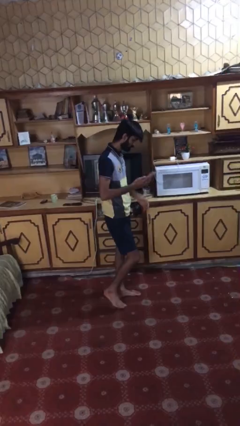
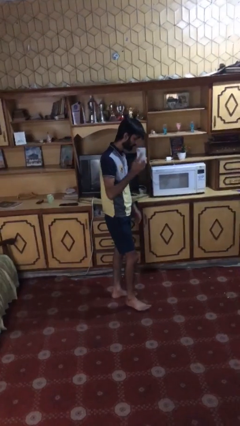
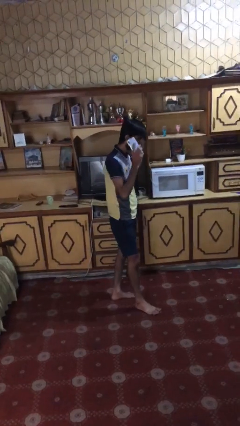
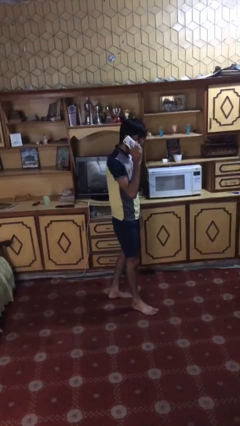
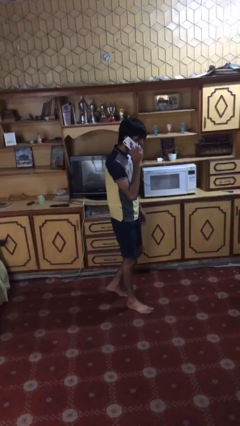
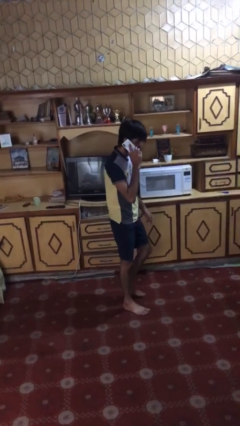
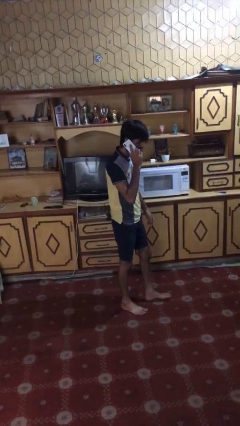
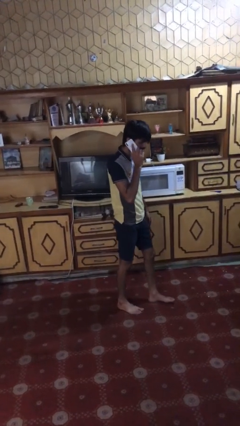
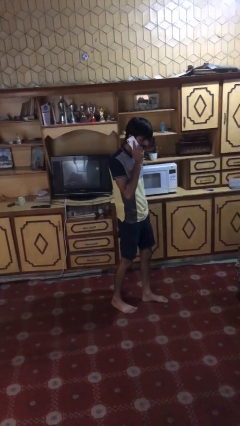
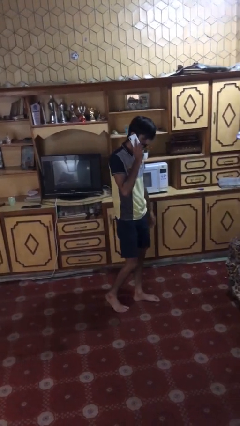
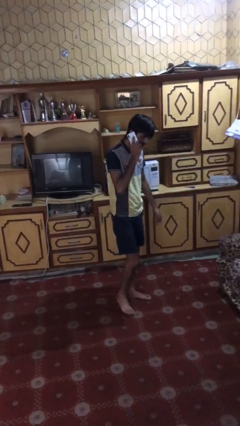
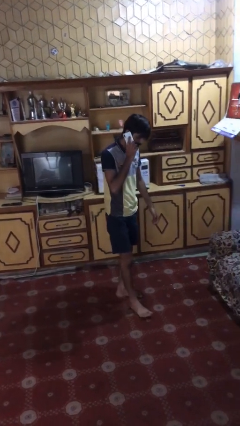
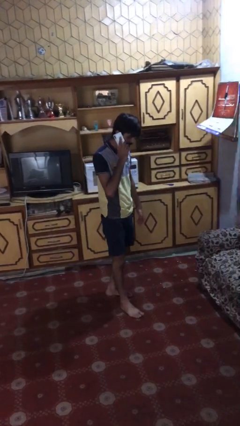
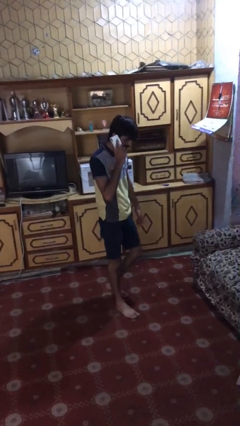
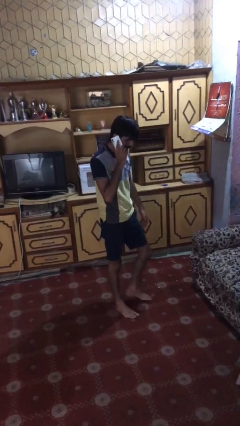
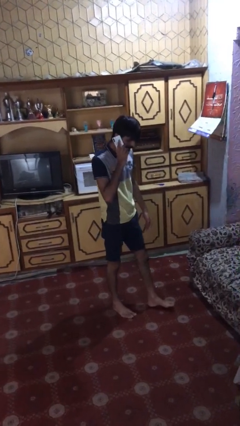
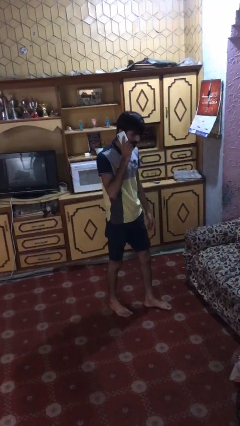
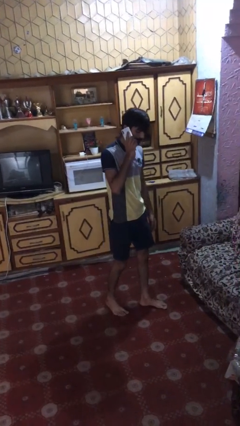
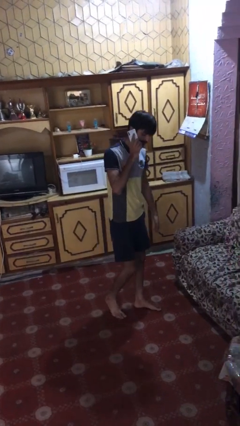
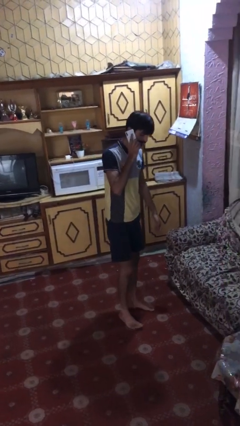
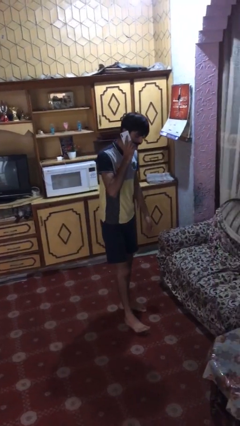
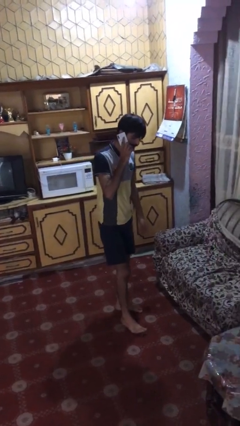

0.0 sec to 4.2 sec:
person talks on phone

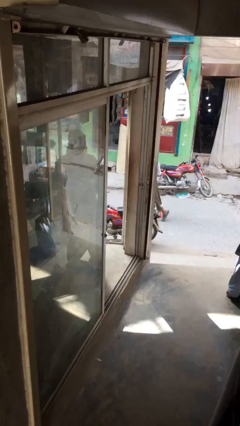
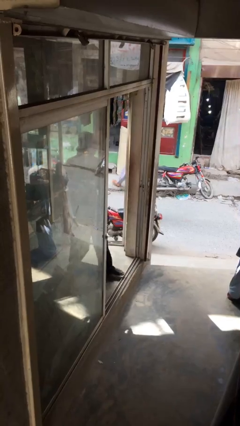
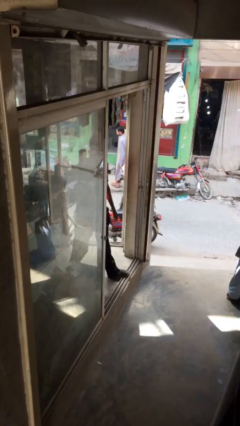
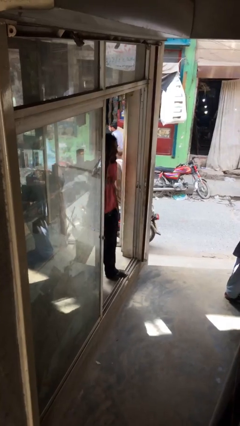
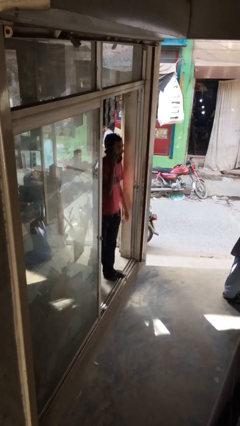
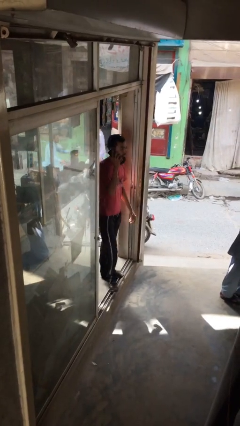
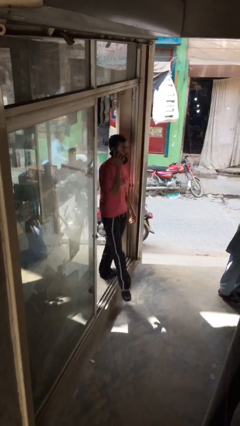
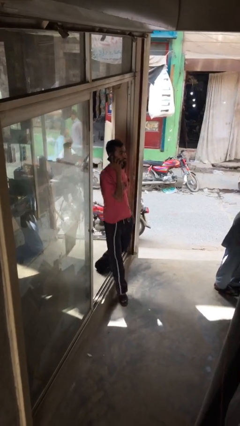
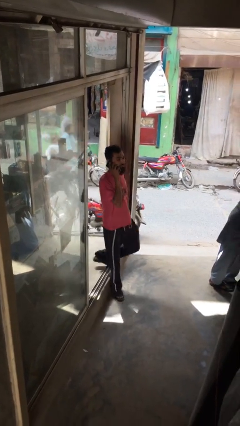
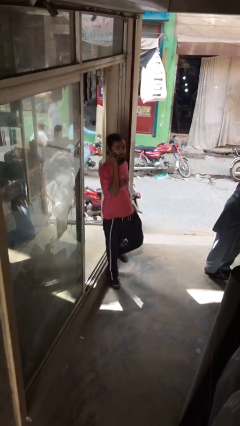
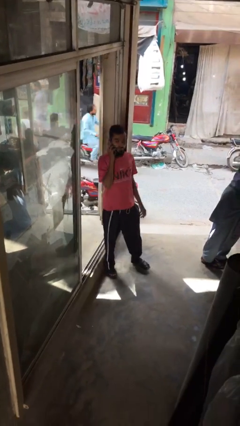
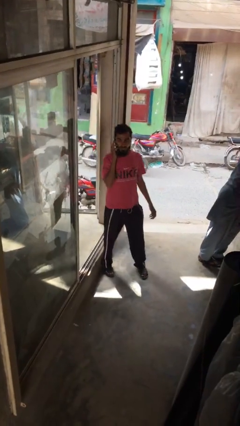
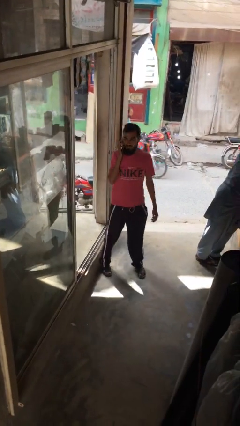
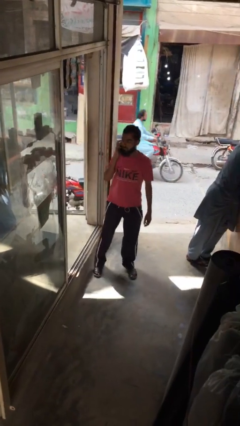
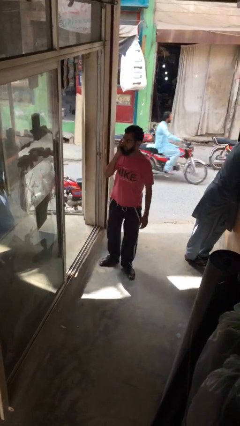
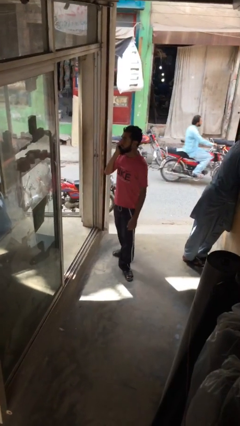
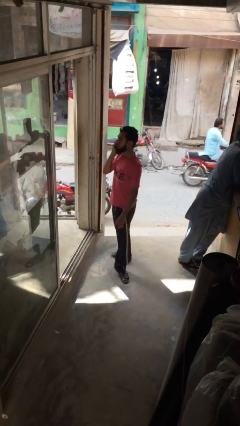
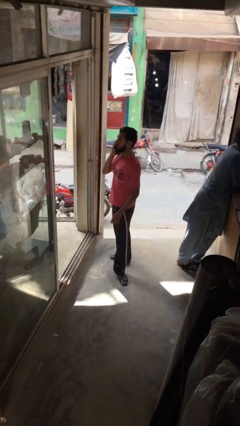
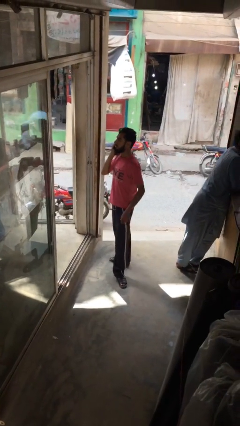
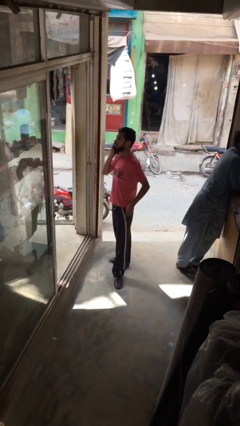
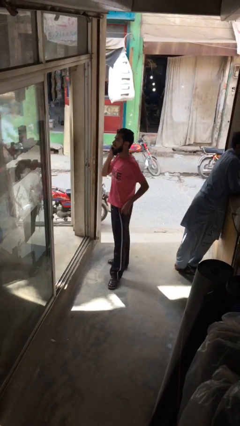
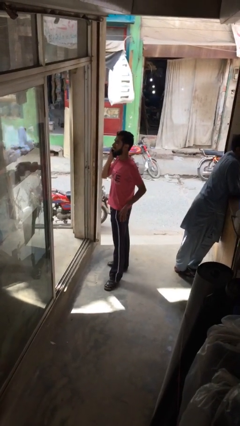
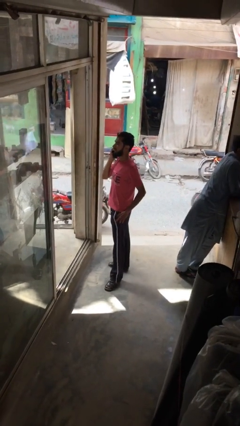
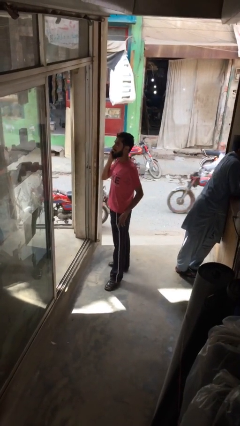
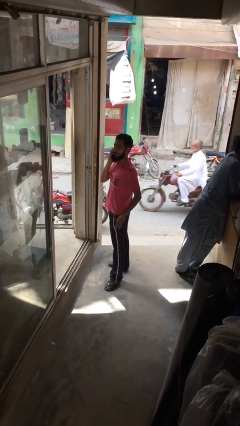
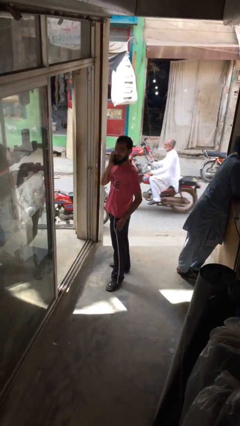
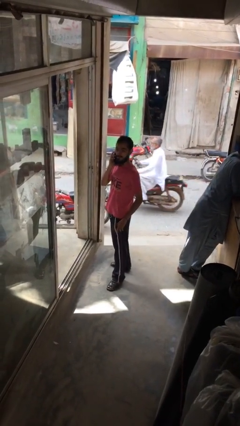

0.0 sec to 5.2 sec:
person enters scene through structure

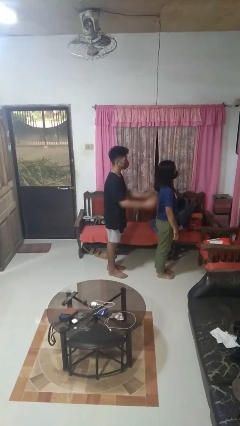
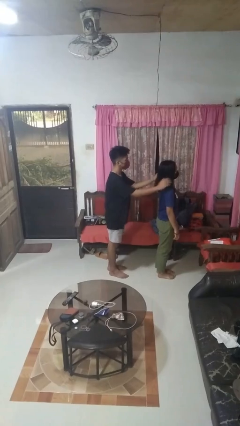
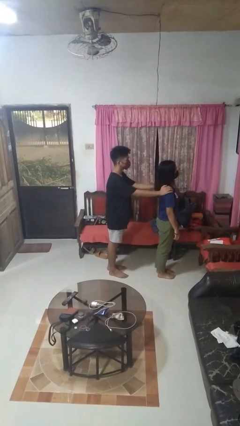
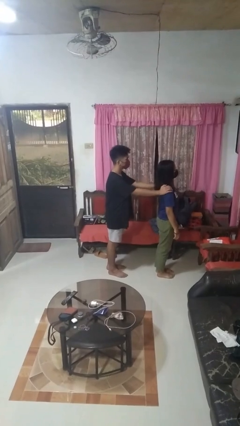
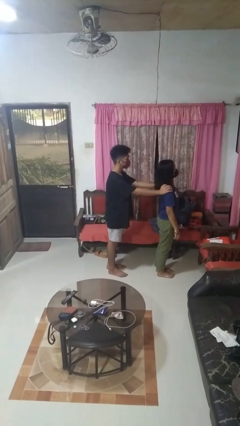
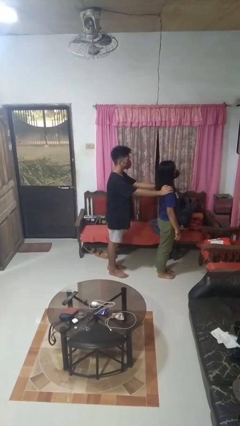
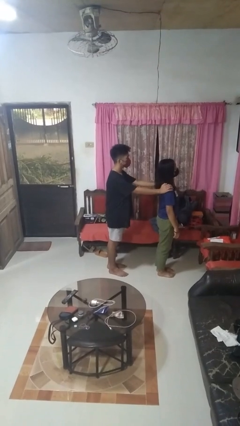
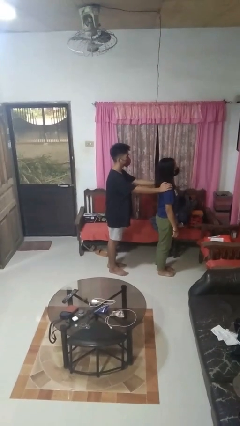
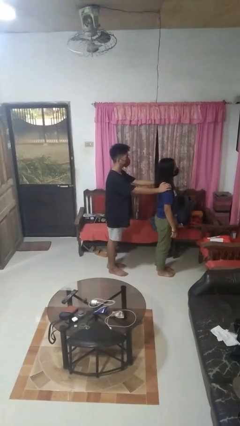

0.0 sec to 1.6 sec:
person grabs person by shoulder

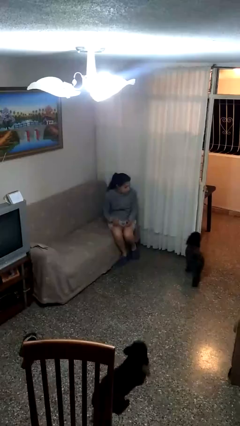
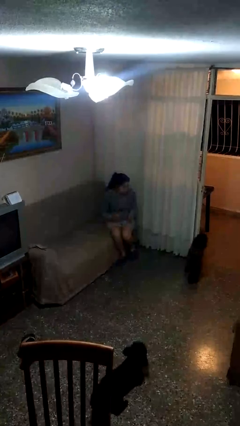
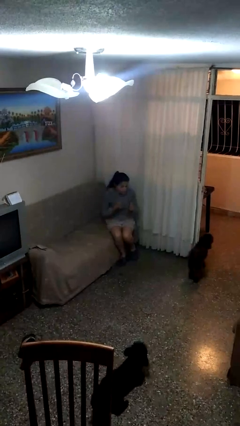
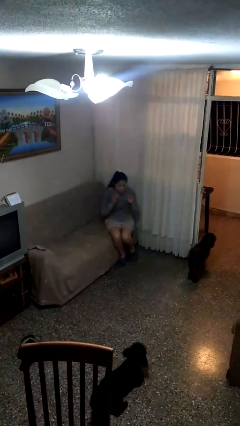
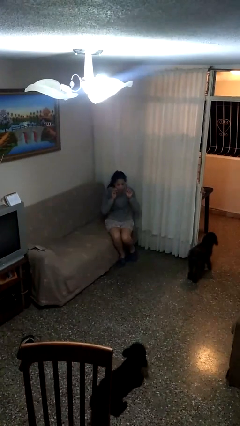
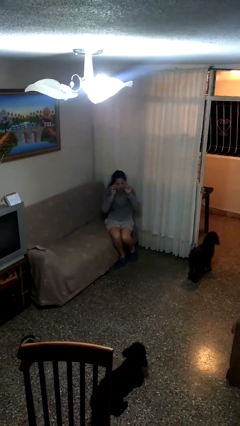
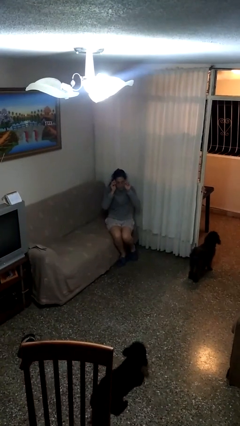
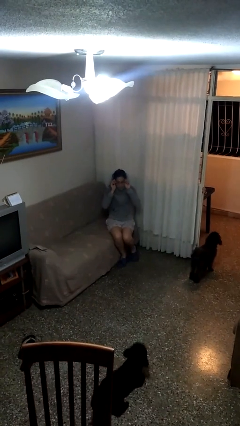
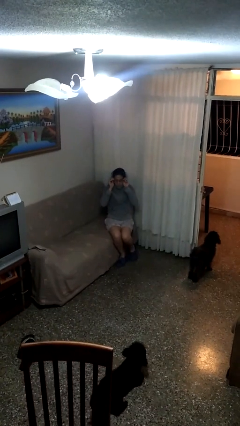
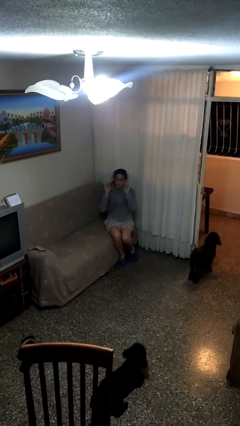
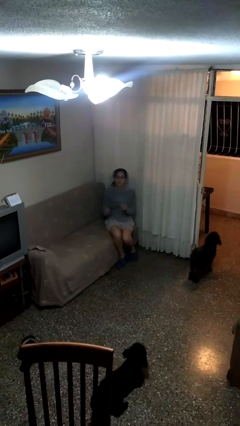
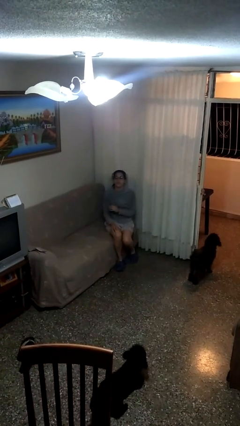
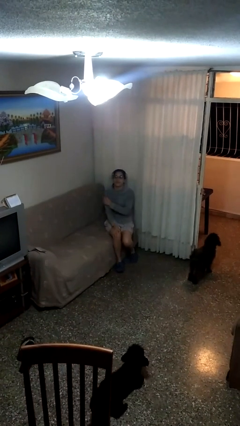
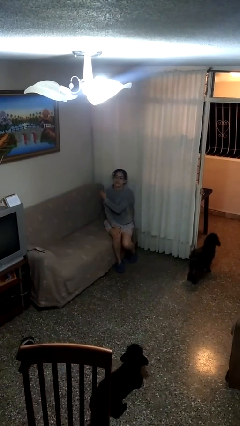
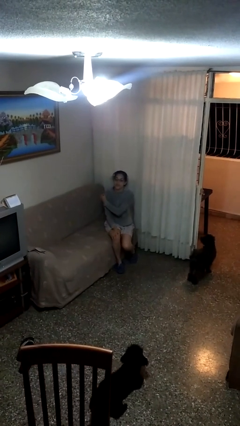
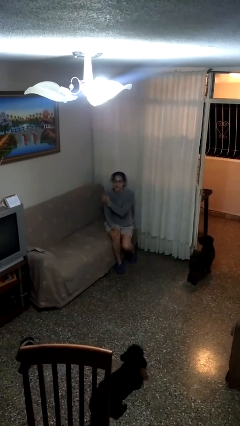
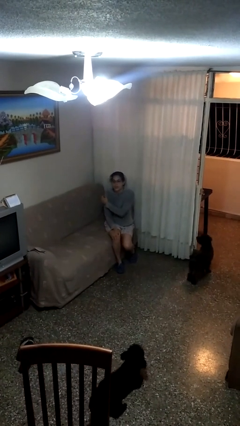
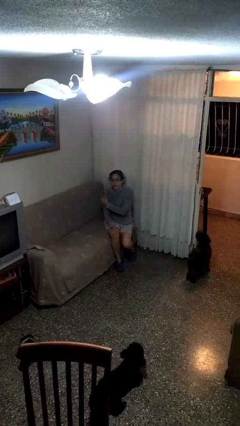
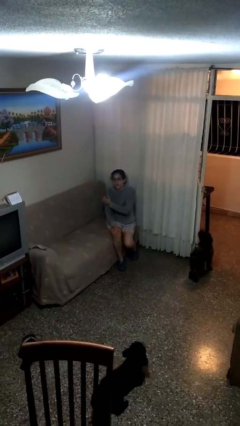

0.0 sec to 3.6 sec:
person puts on glasses

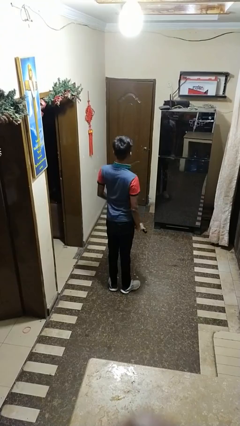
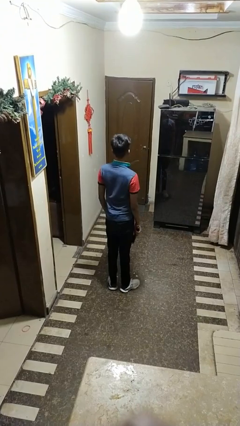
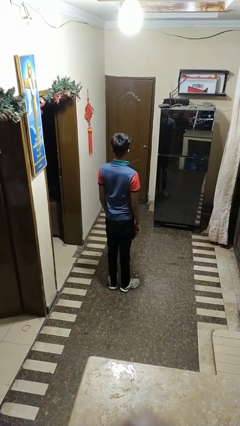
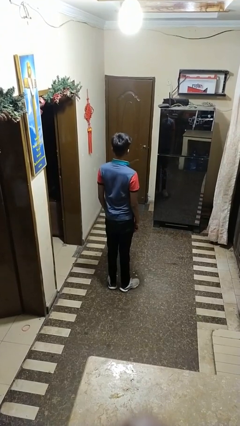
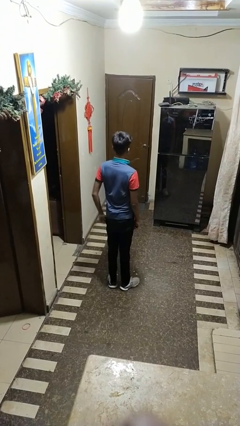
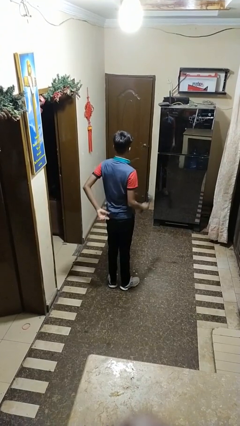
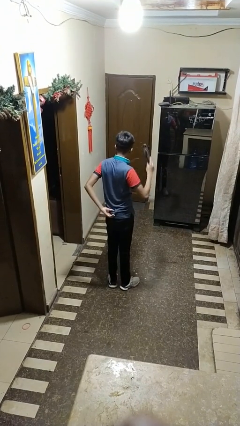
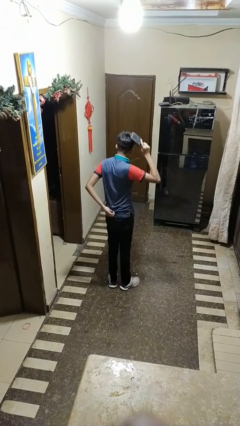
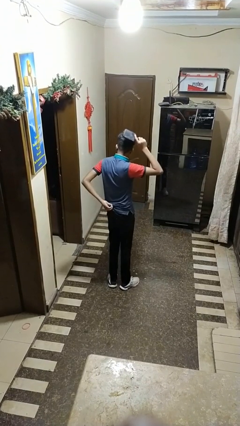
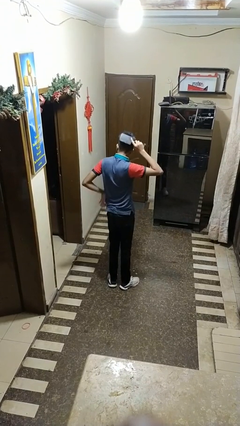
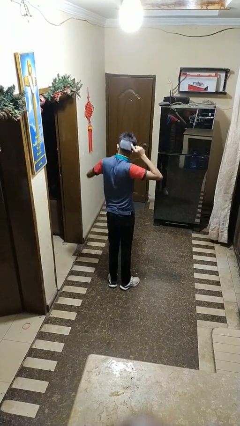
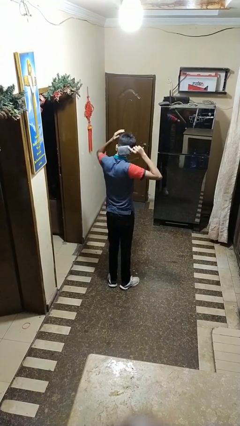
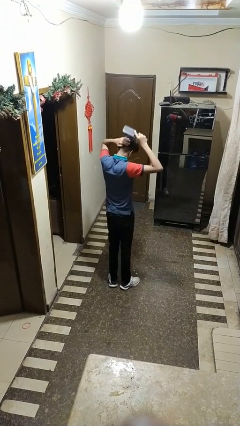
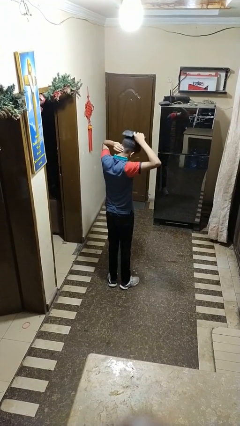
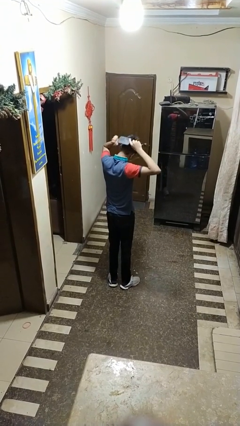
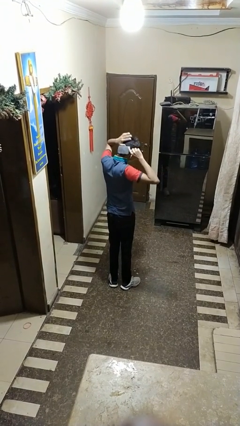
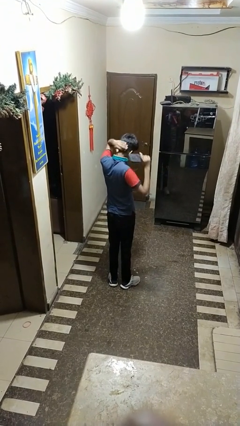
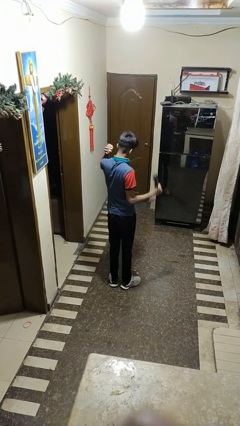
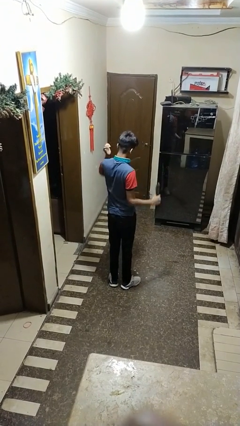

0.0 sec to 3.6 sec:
person brushes hair
